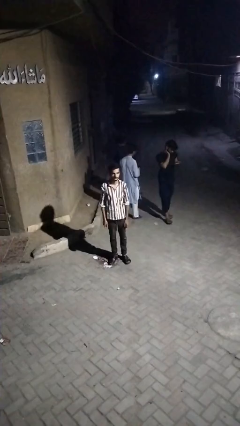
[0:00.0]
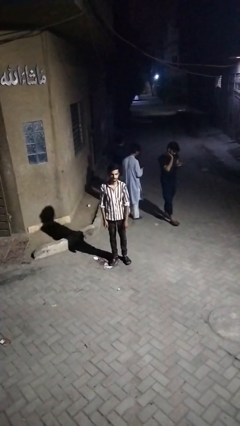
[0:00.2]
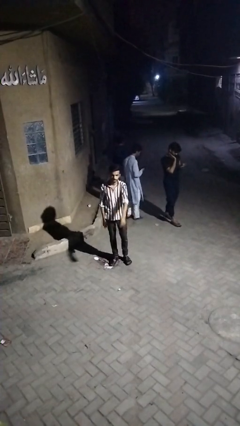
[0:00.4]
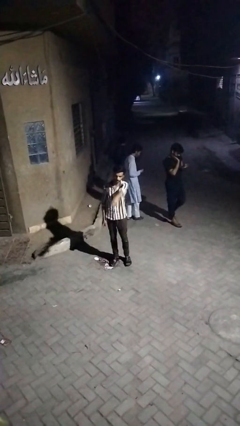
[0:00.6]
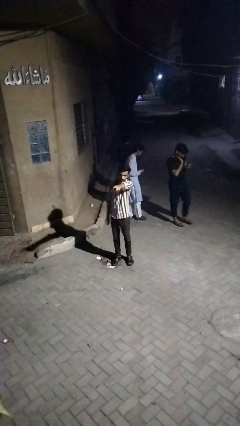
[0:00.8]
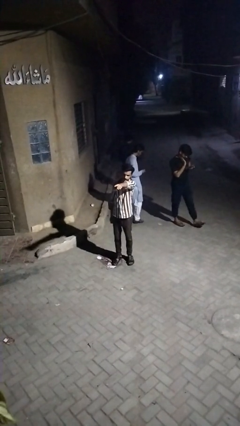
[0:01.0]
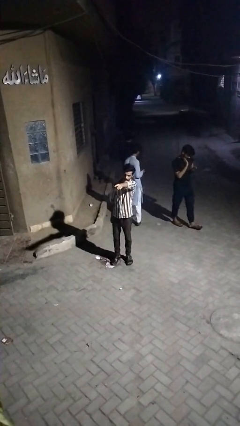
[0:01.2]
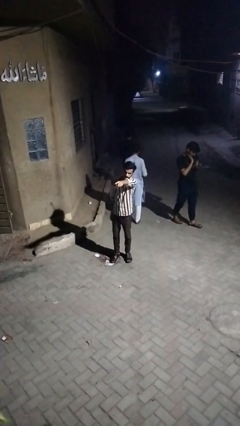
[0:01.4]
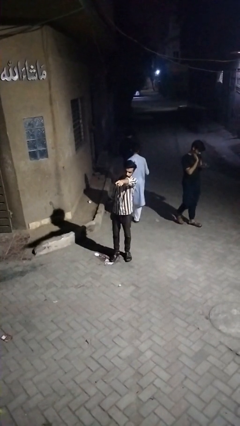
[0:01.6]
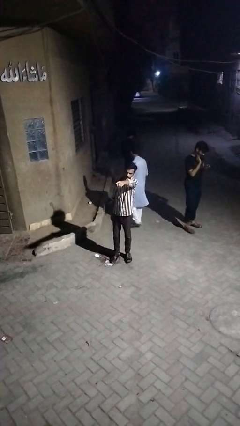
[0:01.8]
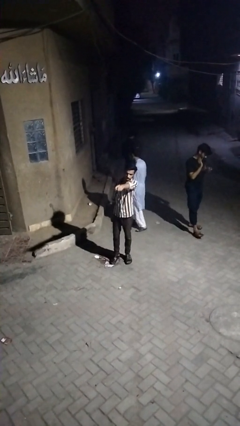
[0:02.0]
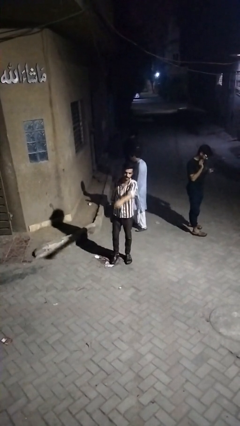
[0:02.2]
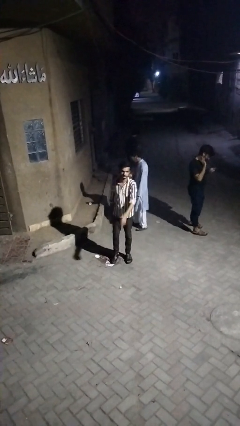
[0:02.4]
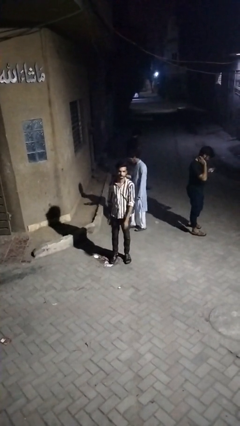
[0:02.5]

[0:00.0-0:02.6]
person points at person

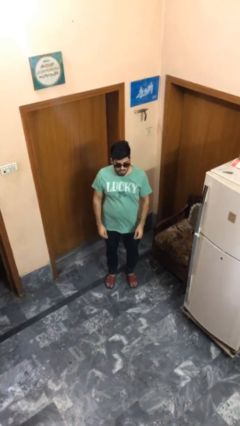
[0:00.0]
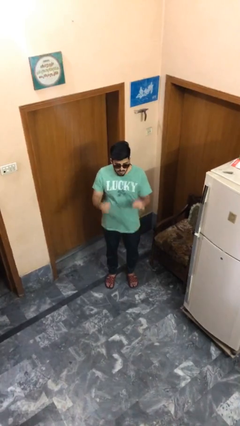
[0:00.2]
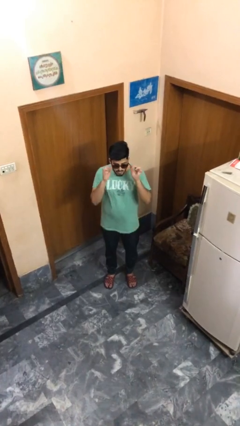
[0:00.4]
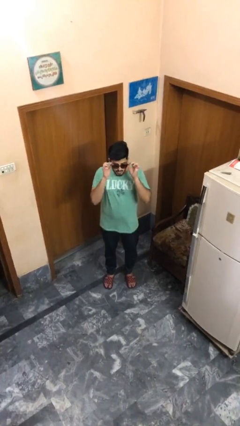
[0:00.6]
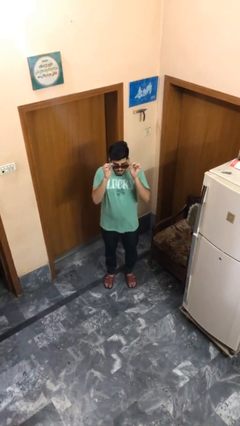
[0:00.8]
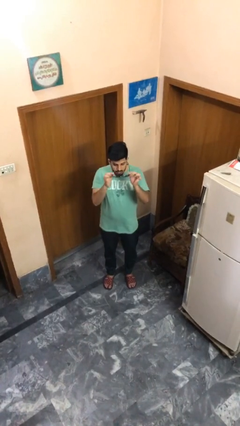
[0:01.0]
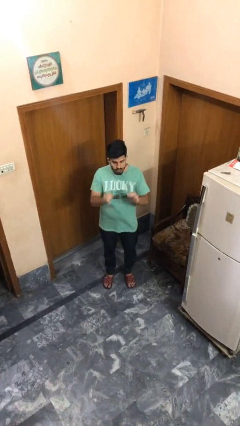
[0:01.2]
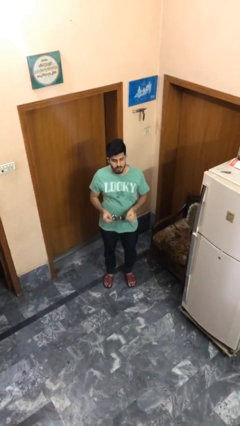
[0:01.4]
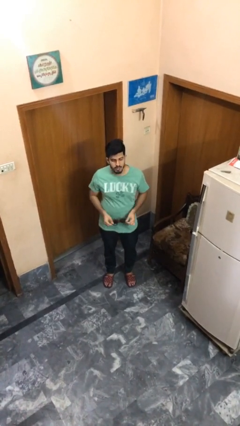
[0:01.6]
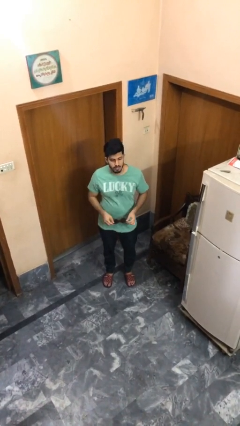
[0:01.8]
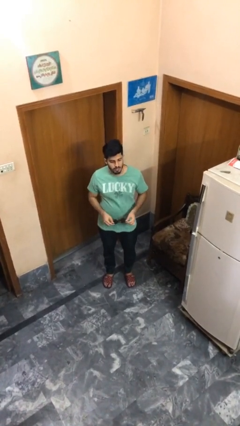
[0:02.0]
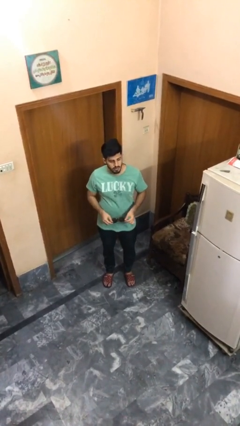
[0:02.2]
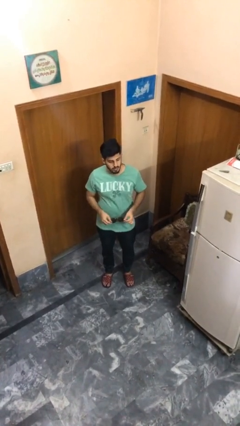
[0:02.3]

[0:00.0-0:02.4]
person takes off sunglasses

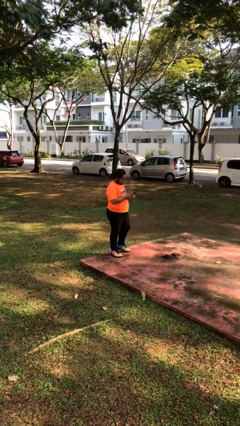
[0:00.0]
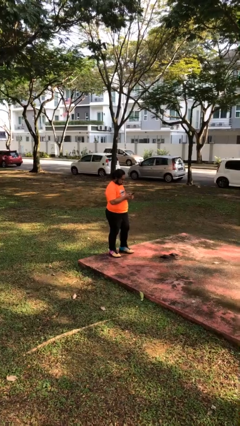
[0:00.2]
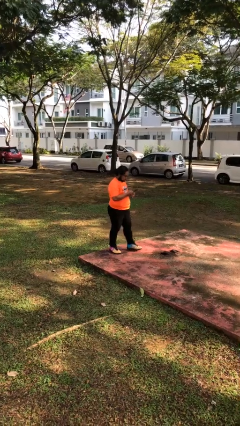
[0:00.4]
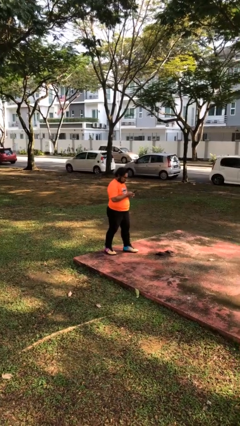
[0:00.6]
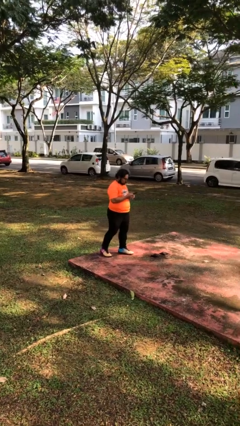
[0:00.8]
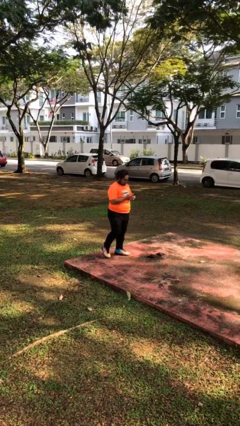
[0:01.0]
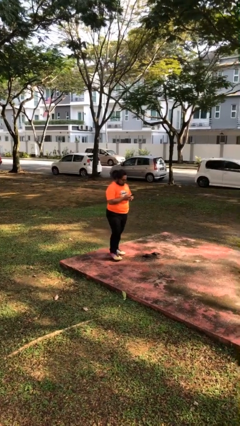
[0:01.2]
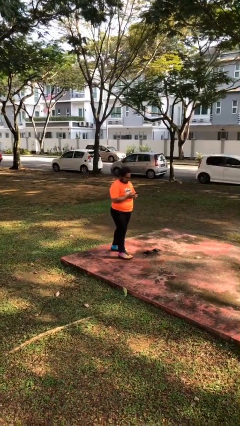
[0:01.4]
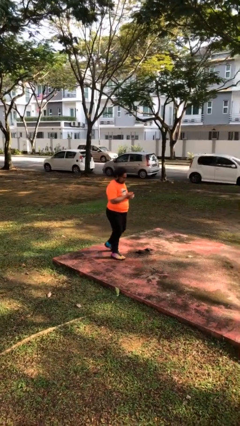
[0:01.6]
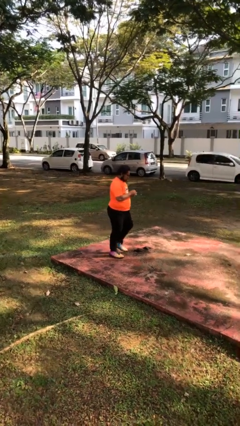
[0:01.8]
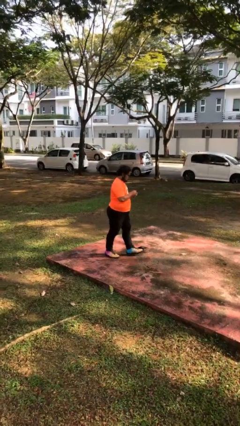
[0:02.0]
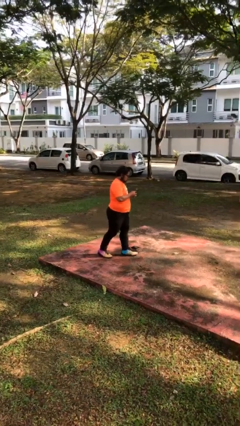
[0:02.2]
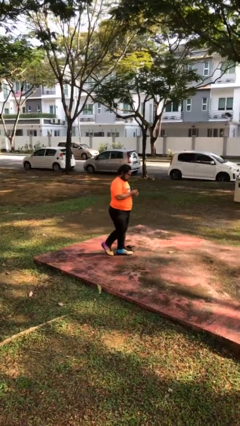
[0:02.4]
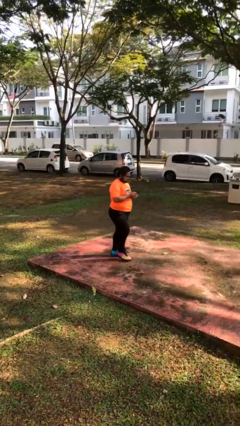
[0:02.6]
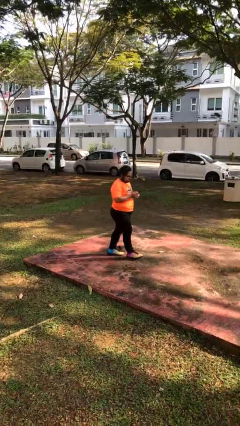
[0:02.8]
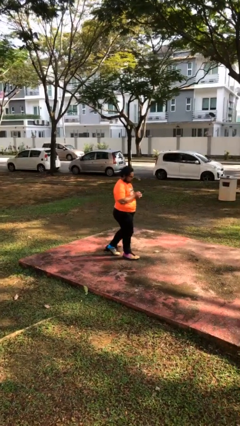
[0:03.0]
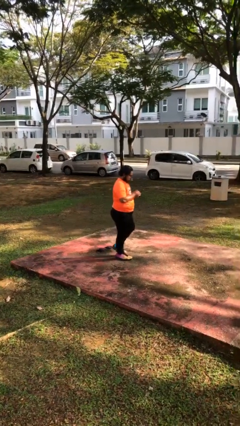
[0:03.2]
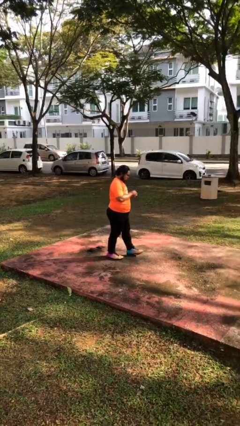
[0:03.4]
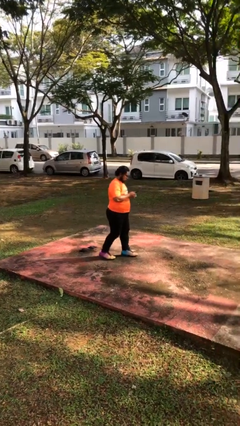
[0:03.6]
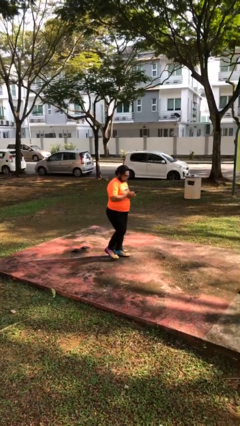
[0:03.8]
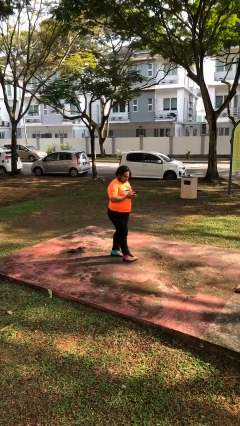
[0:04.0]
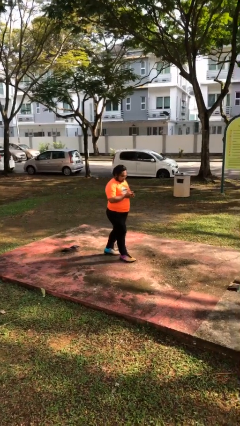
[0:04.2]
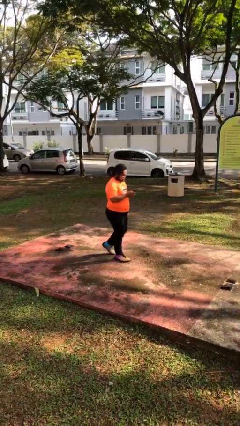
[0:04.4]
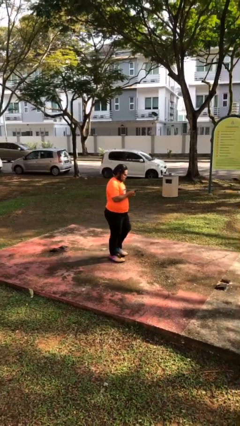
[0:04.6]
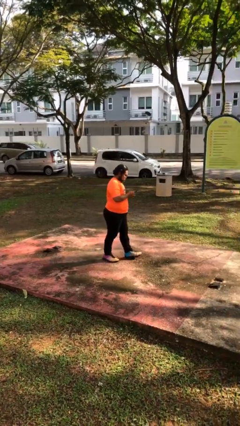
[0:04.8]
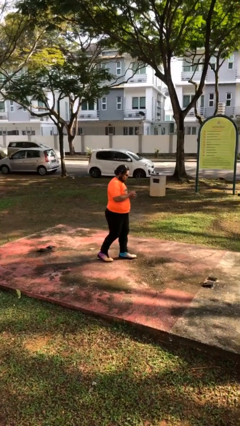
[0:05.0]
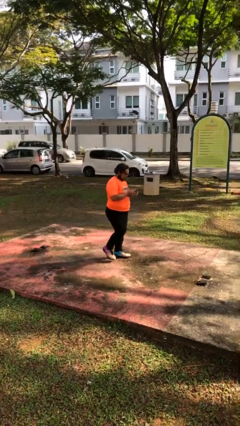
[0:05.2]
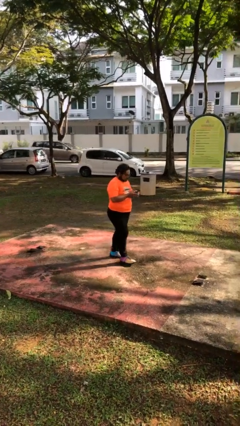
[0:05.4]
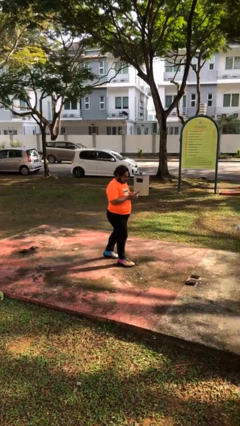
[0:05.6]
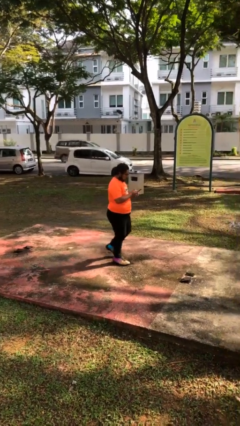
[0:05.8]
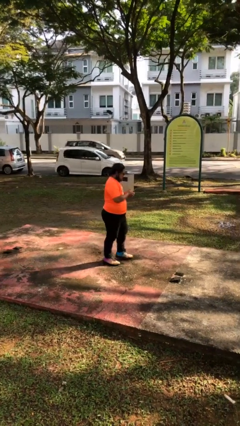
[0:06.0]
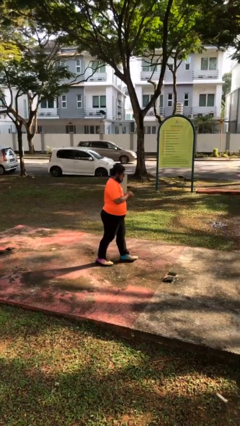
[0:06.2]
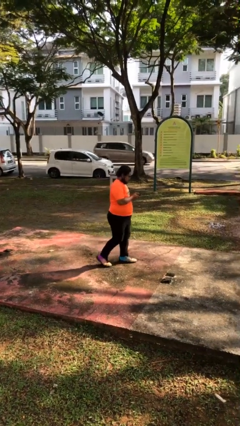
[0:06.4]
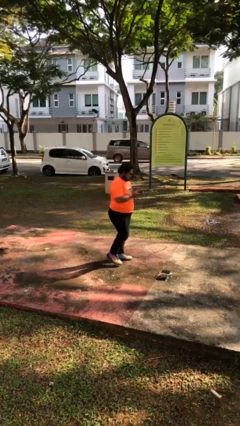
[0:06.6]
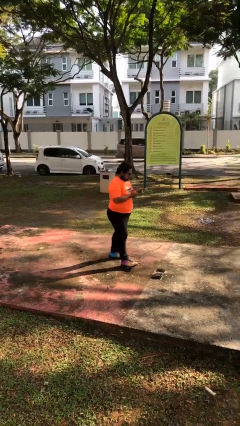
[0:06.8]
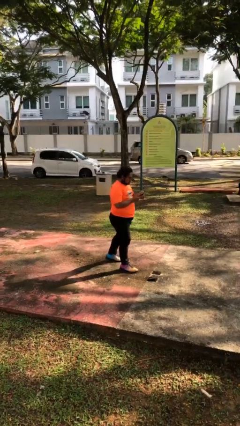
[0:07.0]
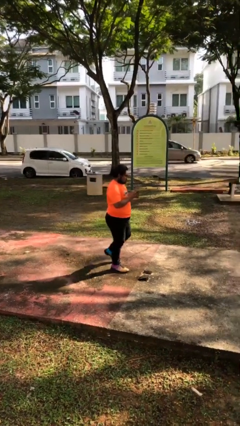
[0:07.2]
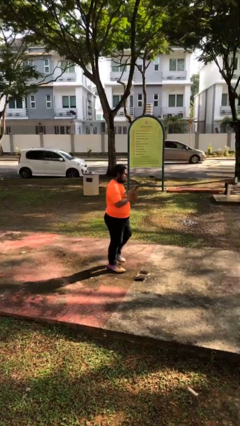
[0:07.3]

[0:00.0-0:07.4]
person texts on phone

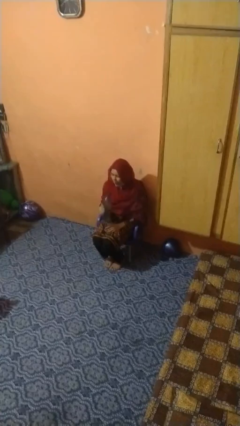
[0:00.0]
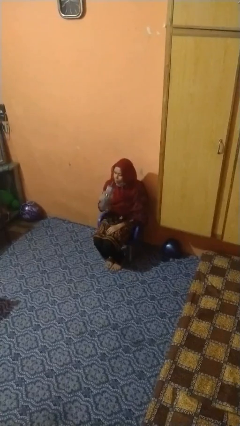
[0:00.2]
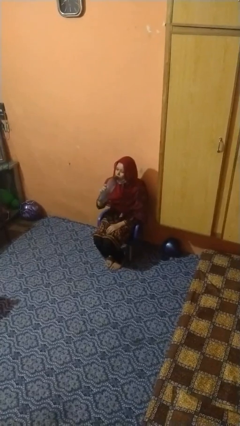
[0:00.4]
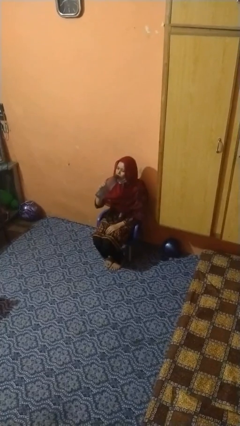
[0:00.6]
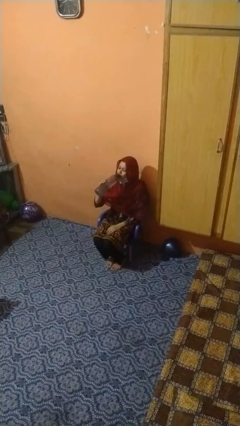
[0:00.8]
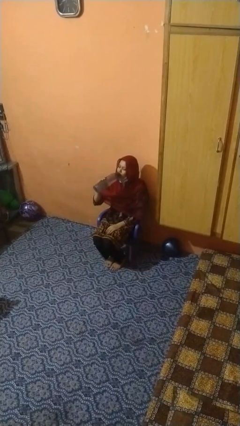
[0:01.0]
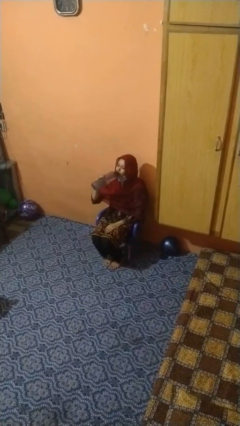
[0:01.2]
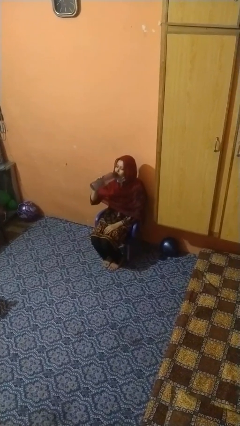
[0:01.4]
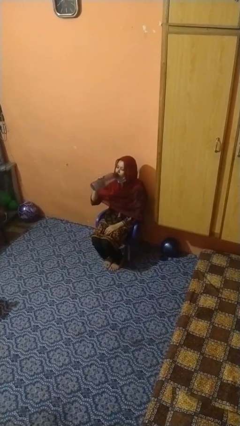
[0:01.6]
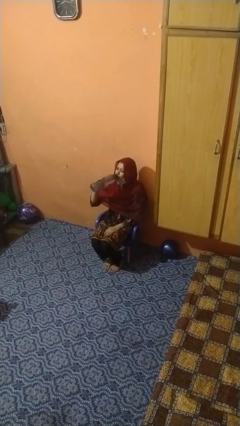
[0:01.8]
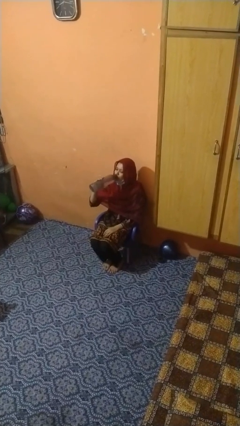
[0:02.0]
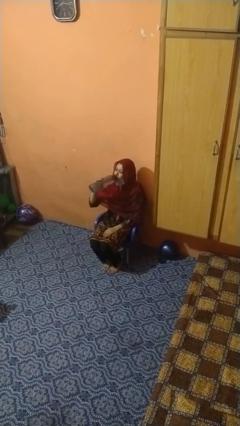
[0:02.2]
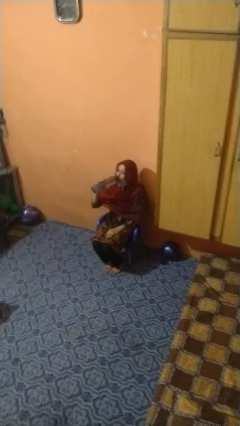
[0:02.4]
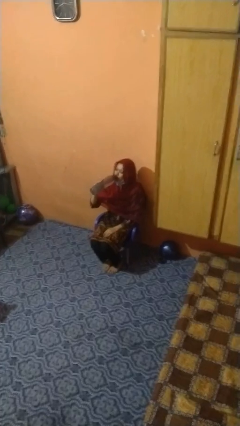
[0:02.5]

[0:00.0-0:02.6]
person drinks from bottle

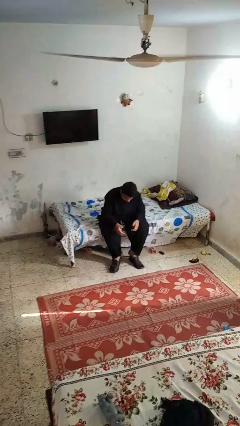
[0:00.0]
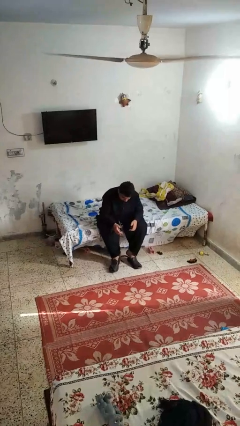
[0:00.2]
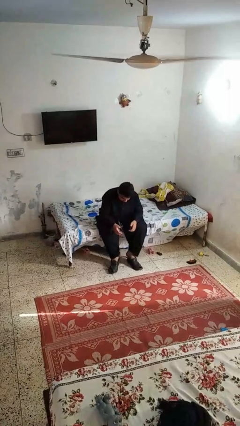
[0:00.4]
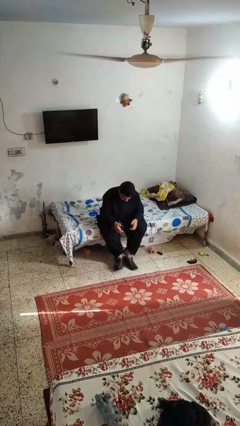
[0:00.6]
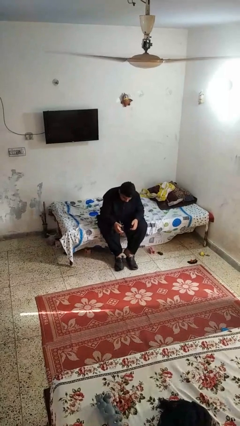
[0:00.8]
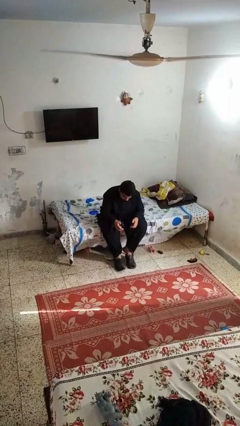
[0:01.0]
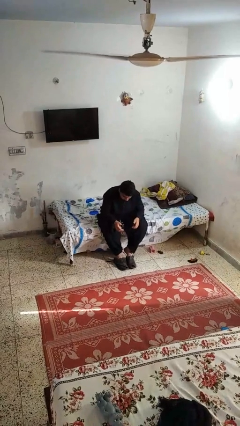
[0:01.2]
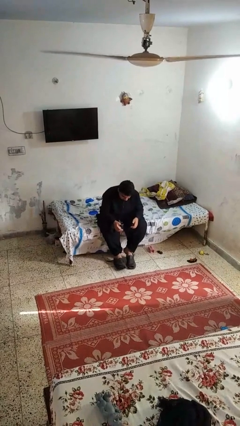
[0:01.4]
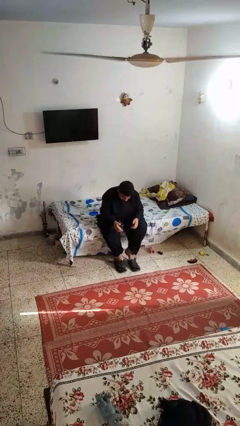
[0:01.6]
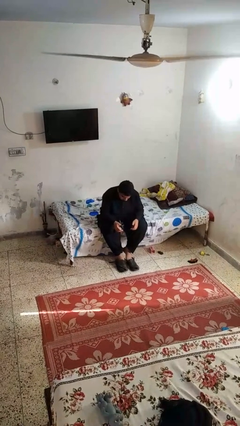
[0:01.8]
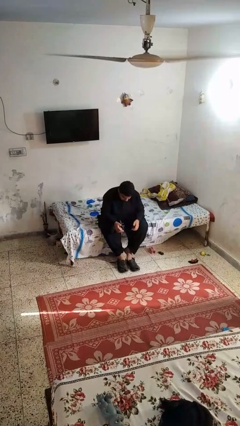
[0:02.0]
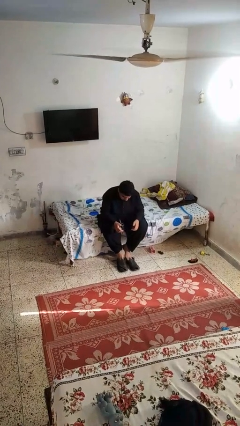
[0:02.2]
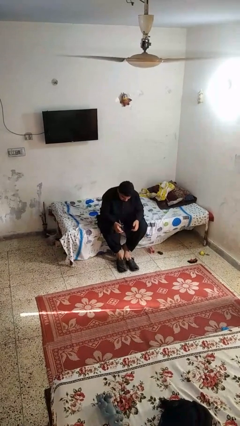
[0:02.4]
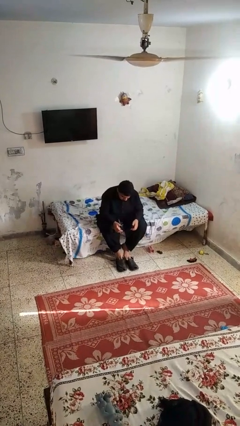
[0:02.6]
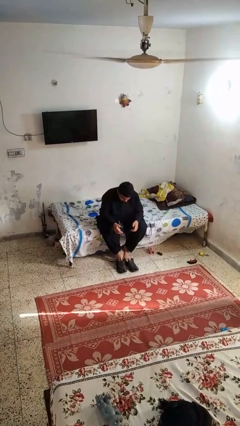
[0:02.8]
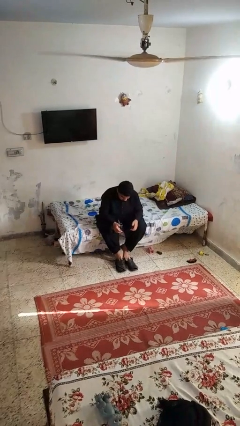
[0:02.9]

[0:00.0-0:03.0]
person takes off shoes
